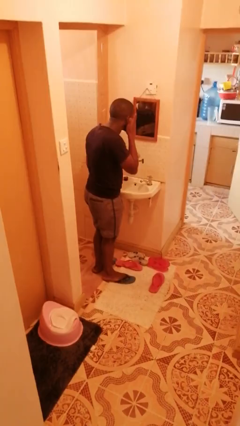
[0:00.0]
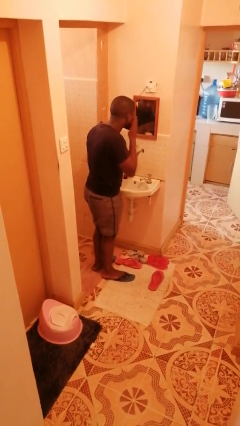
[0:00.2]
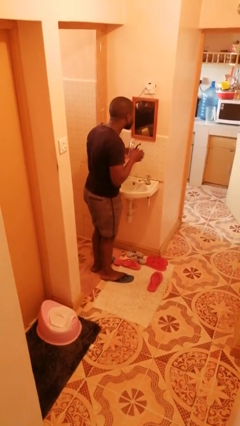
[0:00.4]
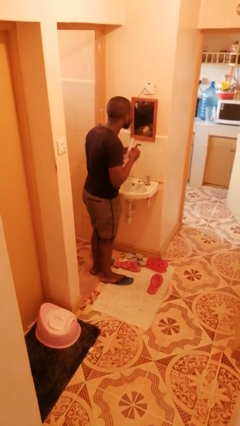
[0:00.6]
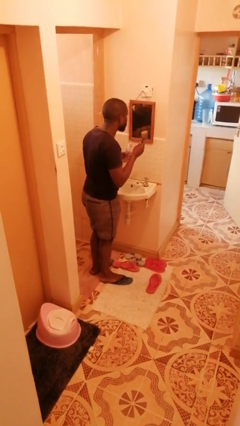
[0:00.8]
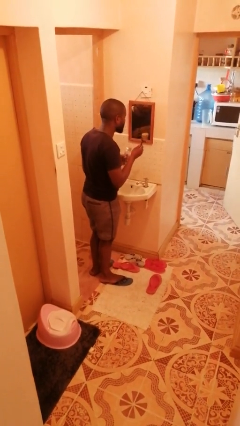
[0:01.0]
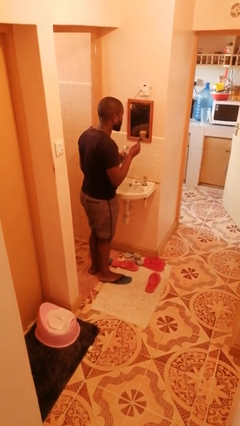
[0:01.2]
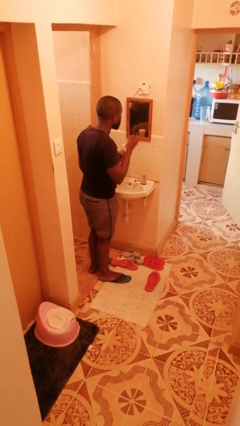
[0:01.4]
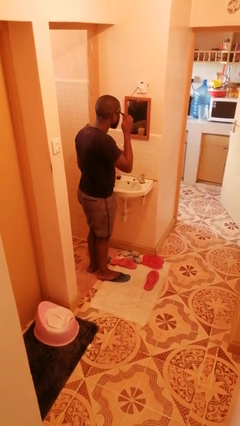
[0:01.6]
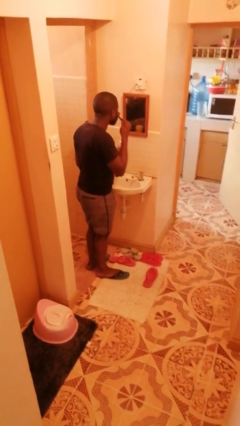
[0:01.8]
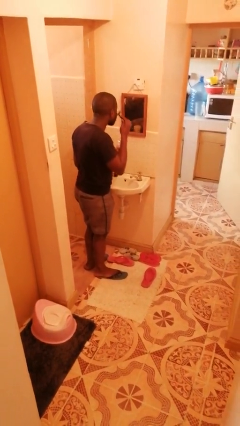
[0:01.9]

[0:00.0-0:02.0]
person applies shaving cream

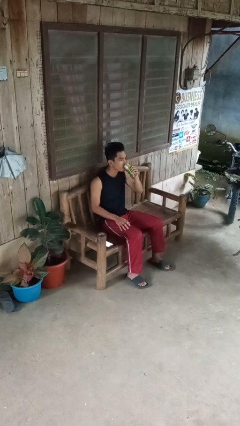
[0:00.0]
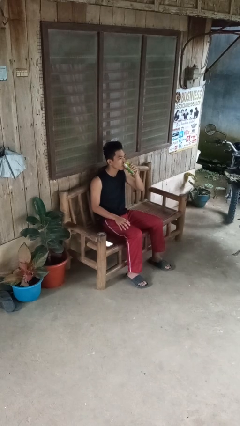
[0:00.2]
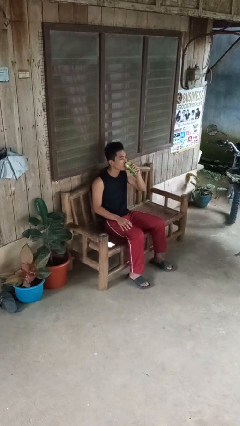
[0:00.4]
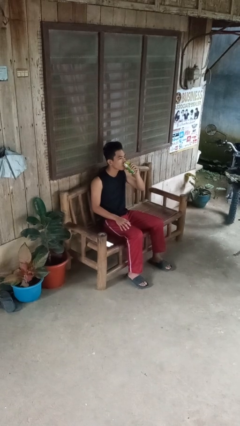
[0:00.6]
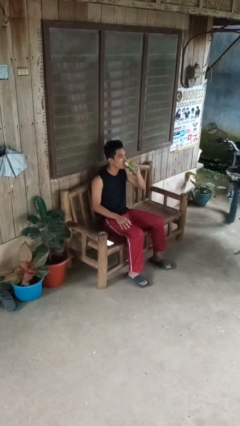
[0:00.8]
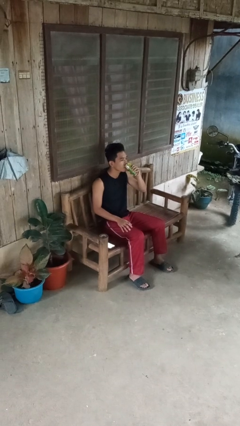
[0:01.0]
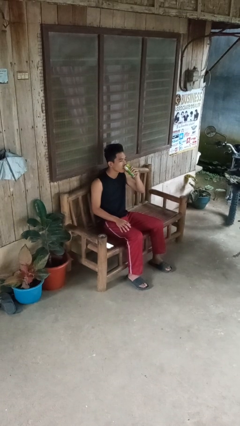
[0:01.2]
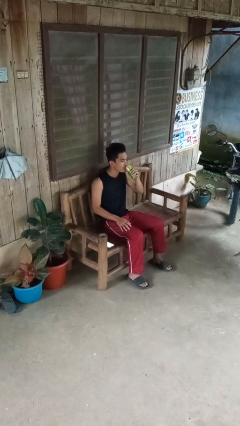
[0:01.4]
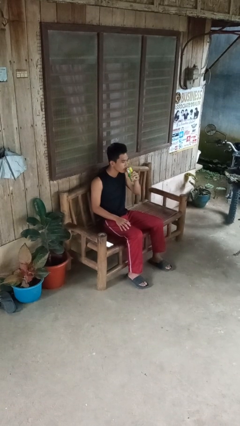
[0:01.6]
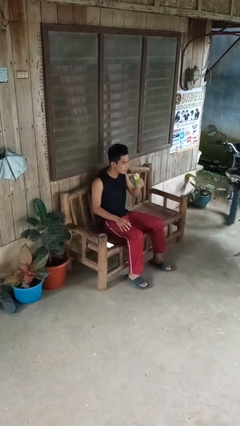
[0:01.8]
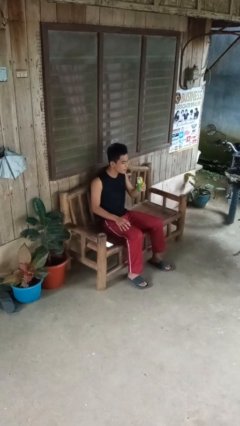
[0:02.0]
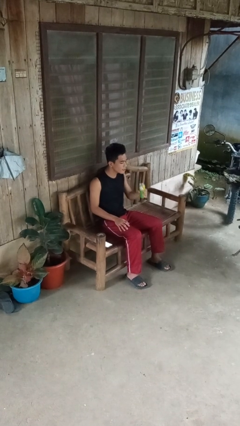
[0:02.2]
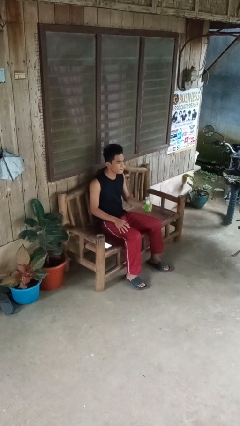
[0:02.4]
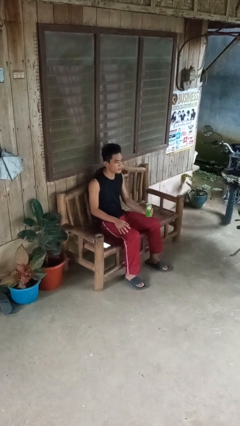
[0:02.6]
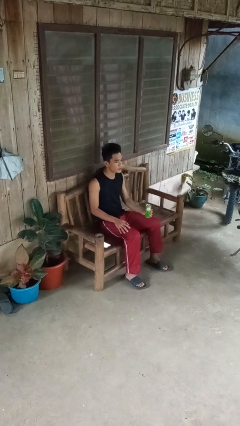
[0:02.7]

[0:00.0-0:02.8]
person drinks from beverage can

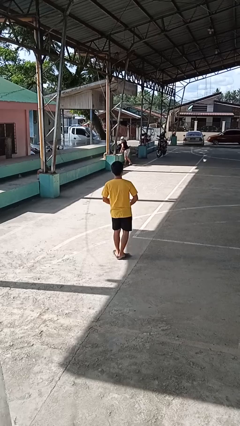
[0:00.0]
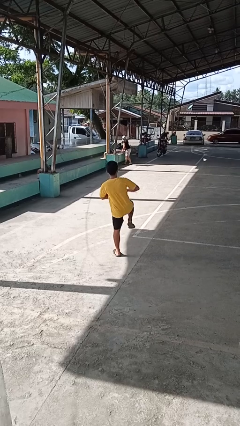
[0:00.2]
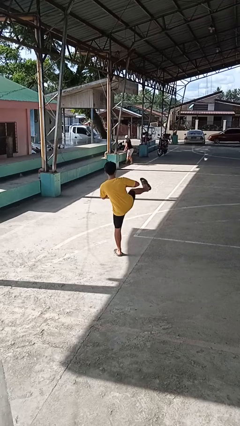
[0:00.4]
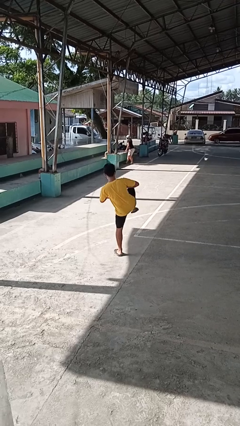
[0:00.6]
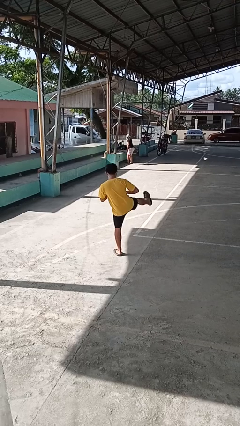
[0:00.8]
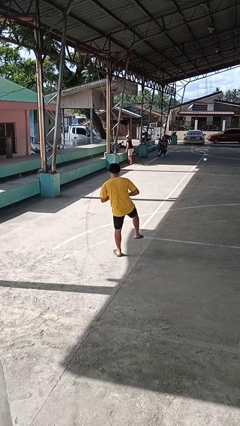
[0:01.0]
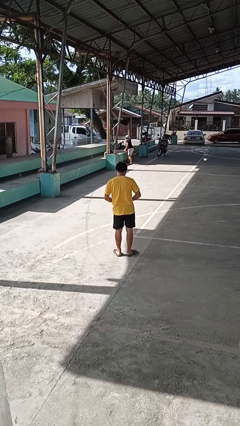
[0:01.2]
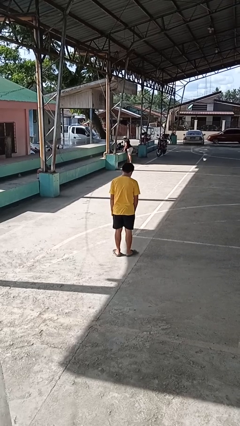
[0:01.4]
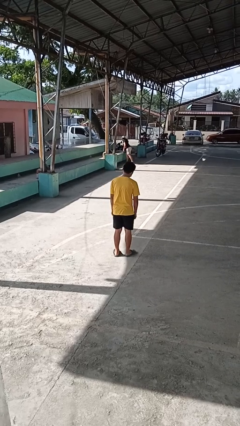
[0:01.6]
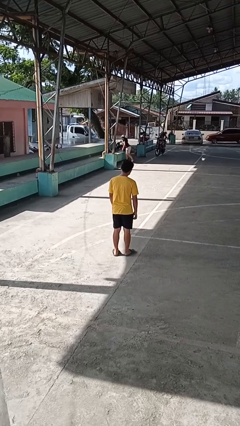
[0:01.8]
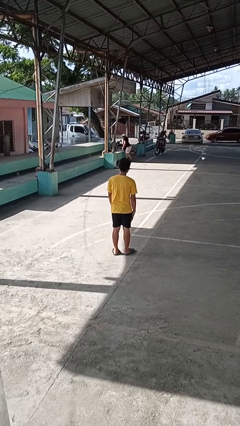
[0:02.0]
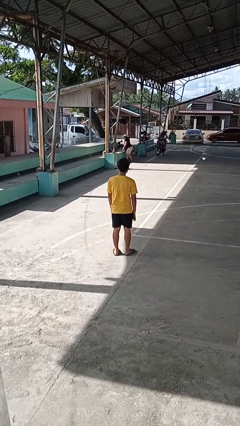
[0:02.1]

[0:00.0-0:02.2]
person karate kicks

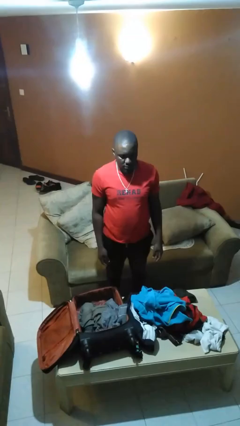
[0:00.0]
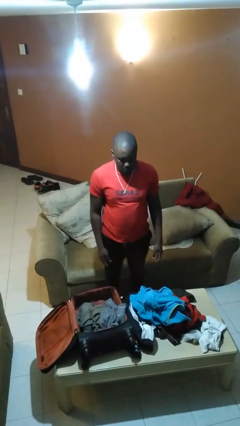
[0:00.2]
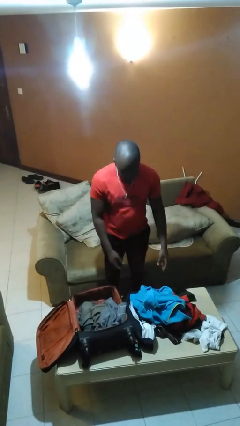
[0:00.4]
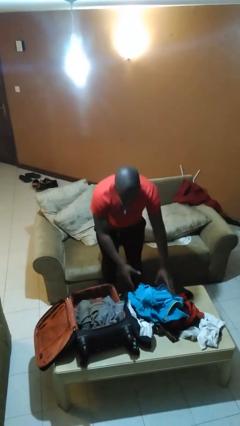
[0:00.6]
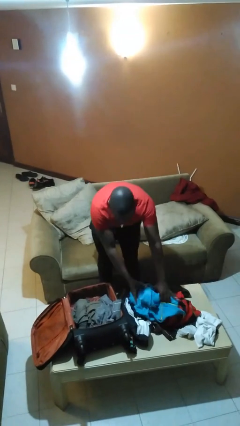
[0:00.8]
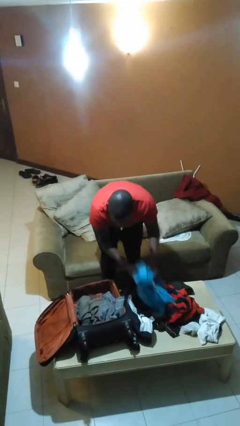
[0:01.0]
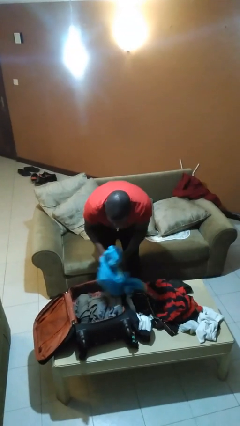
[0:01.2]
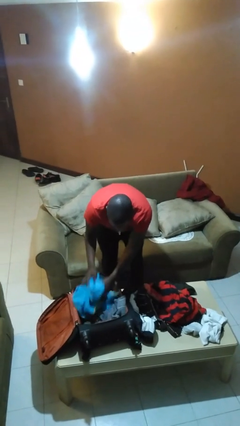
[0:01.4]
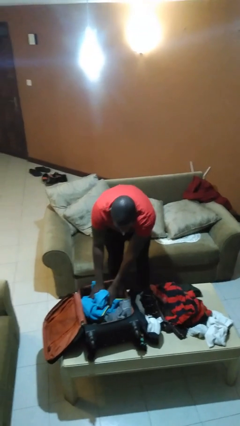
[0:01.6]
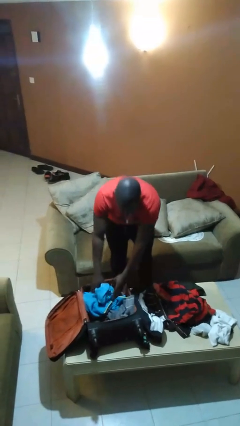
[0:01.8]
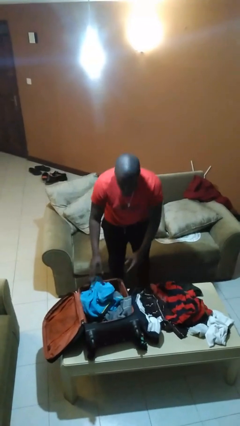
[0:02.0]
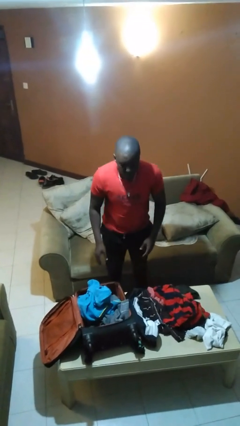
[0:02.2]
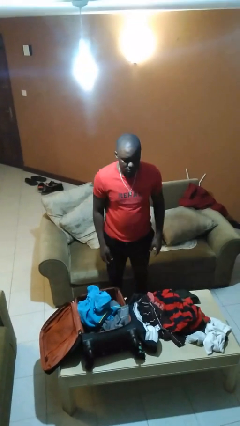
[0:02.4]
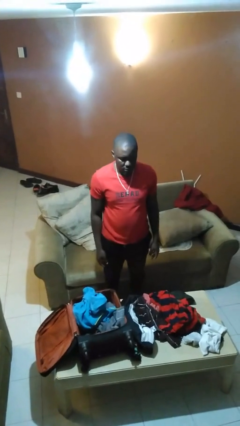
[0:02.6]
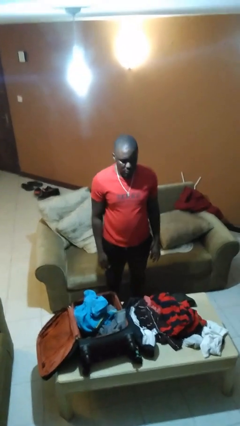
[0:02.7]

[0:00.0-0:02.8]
person loads clothes into suitcase

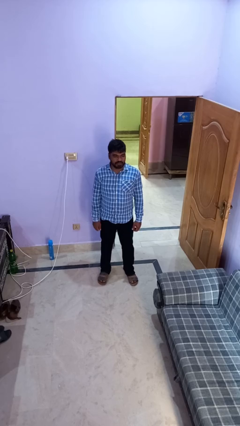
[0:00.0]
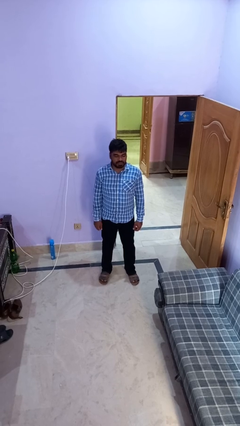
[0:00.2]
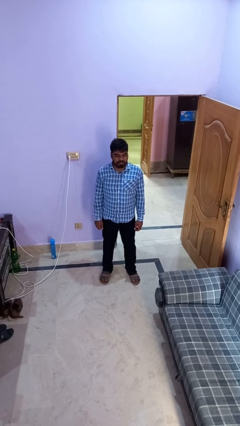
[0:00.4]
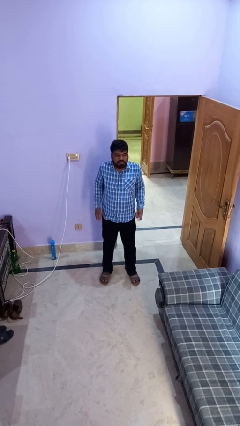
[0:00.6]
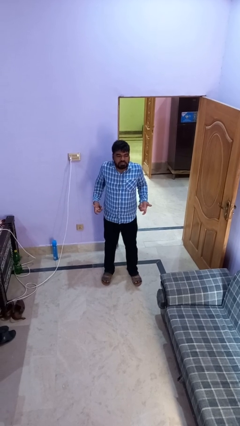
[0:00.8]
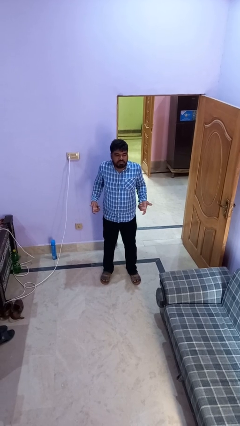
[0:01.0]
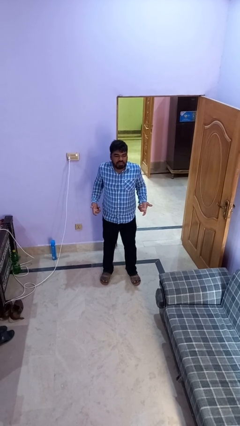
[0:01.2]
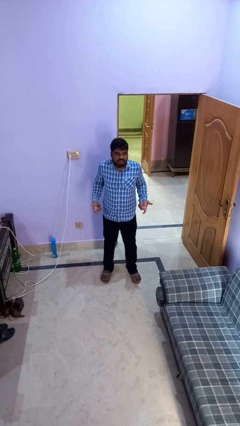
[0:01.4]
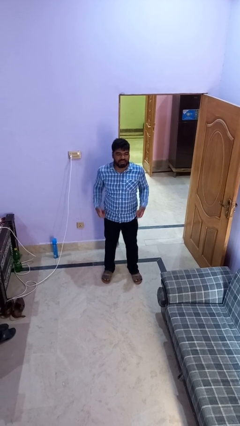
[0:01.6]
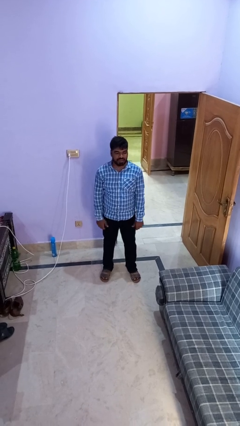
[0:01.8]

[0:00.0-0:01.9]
person shrugs

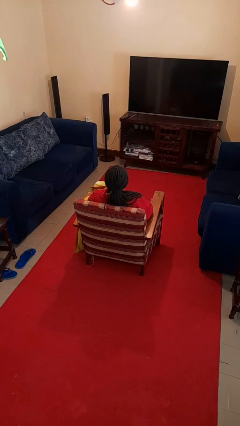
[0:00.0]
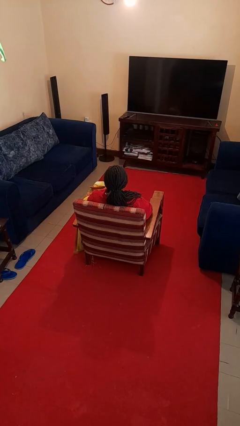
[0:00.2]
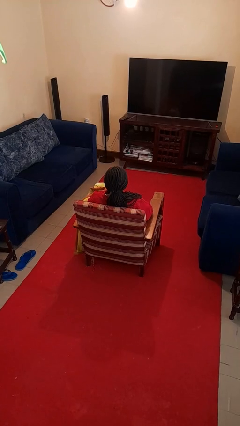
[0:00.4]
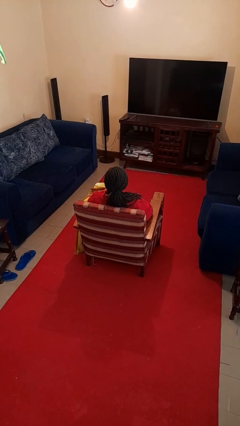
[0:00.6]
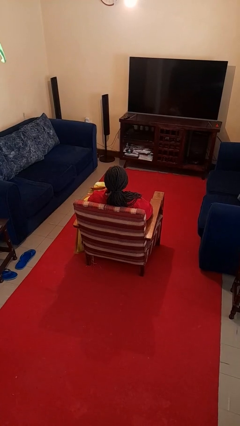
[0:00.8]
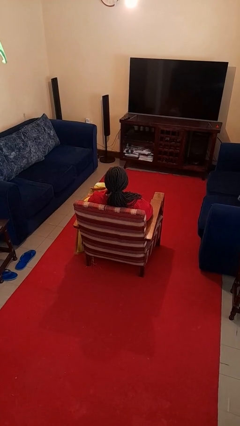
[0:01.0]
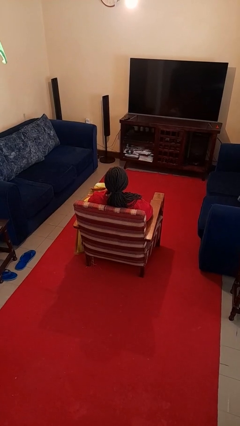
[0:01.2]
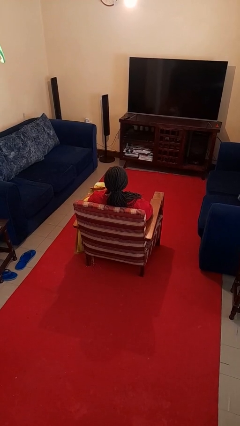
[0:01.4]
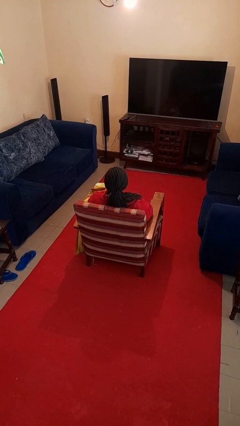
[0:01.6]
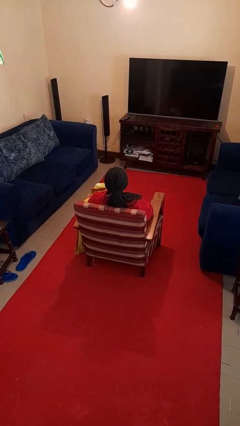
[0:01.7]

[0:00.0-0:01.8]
person uncovers with blanket

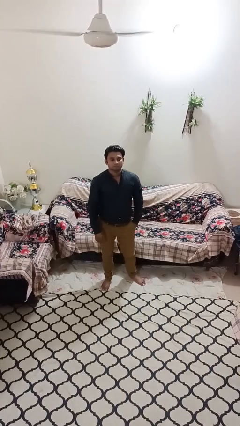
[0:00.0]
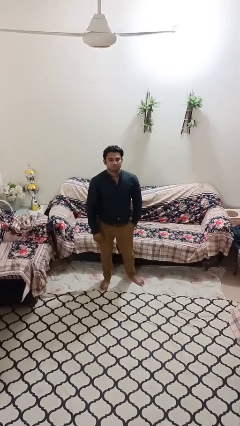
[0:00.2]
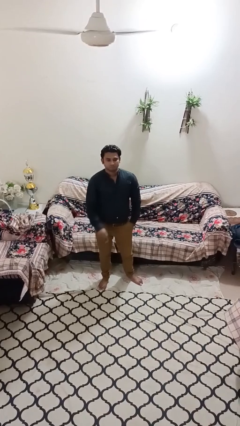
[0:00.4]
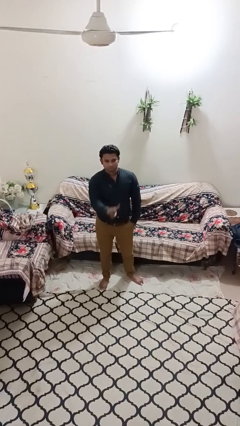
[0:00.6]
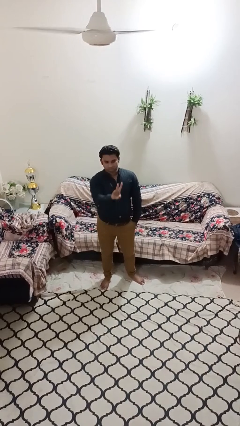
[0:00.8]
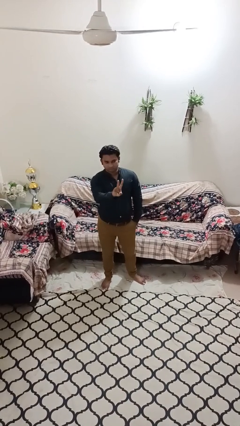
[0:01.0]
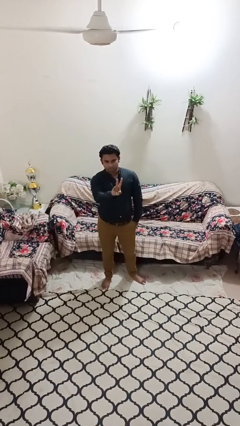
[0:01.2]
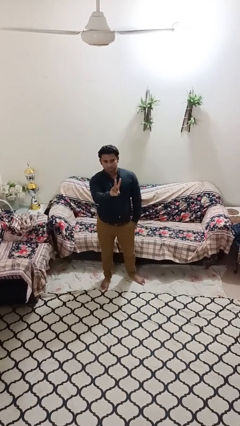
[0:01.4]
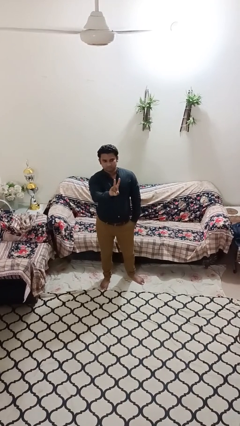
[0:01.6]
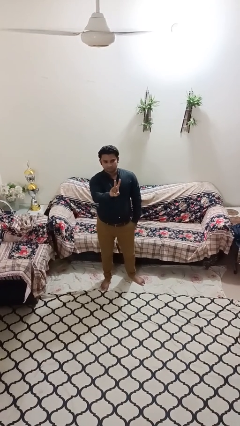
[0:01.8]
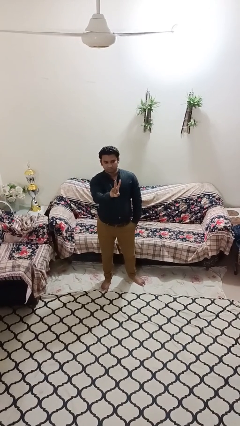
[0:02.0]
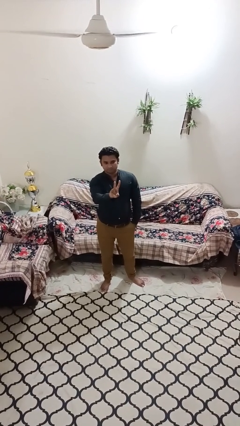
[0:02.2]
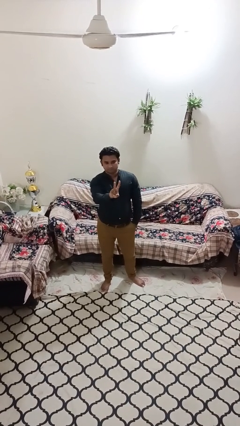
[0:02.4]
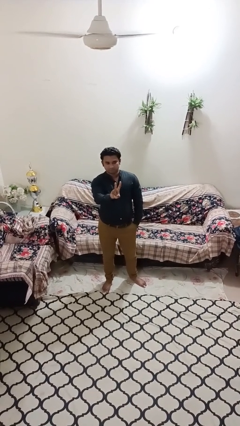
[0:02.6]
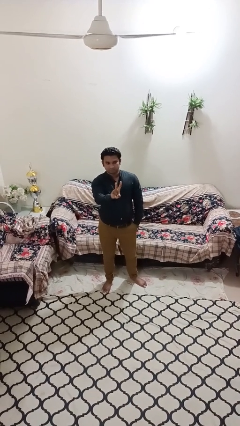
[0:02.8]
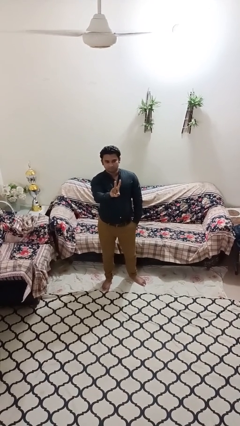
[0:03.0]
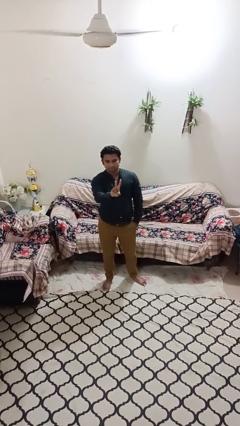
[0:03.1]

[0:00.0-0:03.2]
person gestures peace

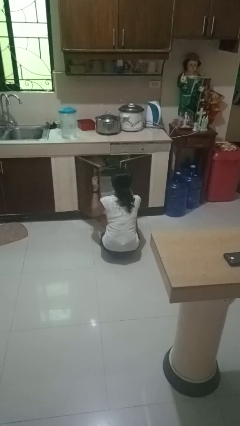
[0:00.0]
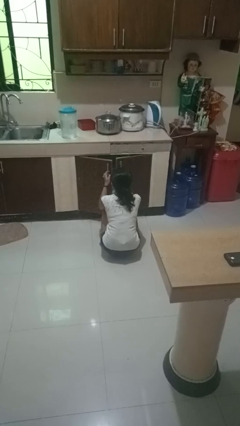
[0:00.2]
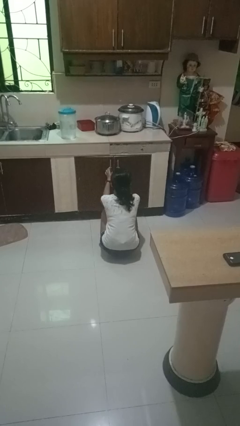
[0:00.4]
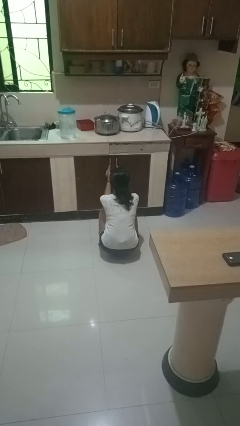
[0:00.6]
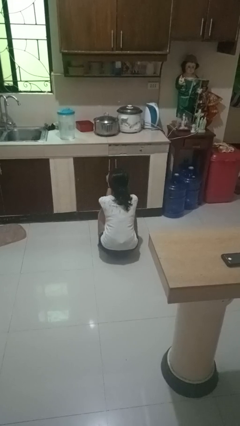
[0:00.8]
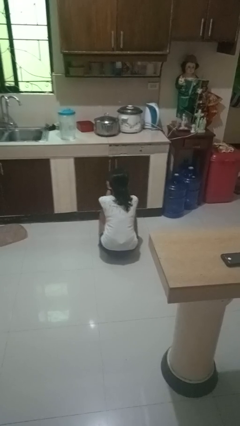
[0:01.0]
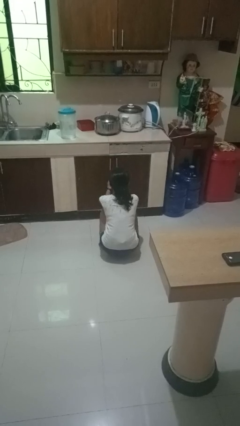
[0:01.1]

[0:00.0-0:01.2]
person closes dishwasher
